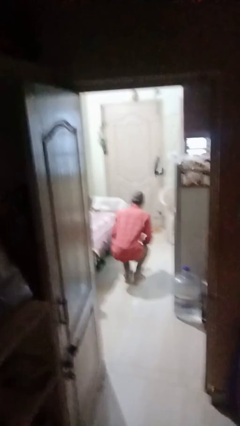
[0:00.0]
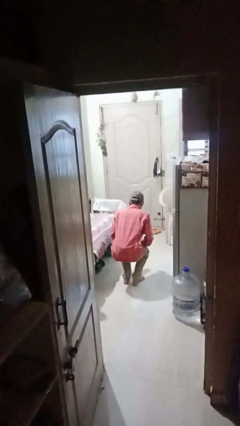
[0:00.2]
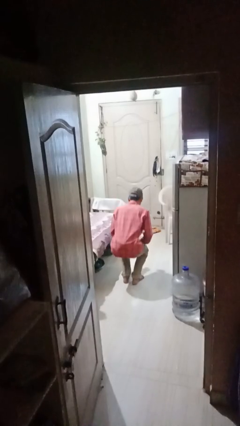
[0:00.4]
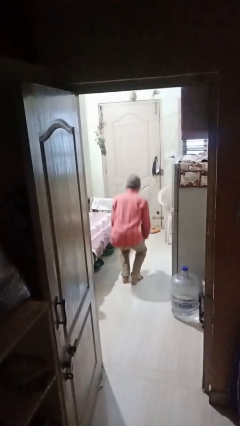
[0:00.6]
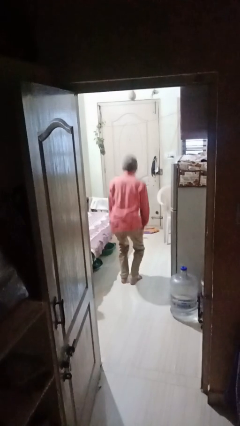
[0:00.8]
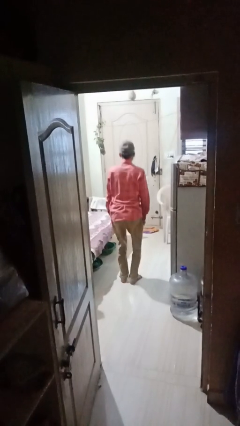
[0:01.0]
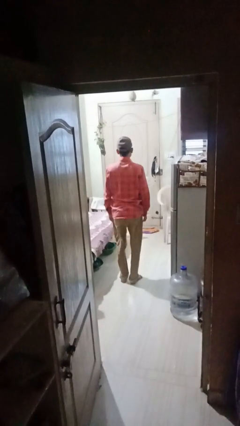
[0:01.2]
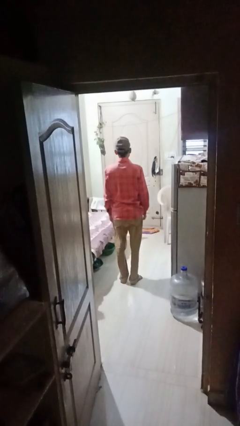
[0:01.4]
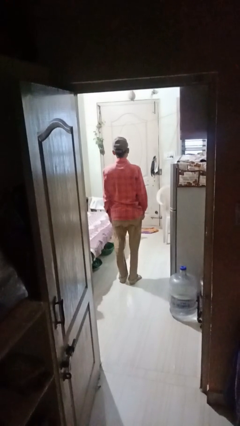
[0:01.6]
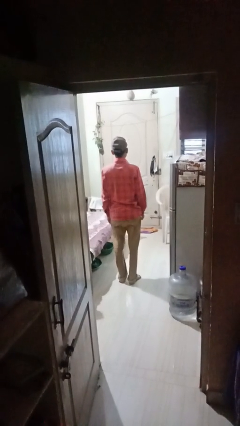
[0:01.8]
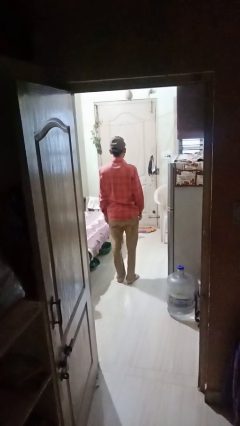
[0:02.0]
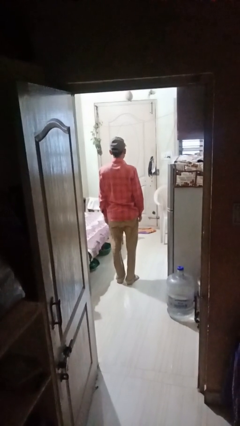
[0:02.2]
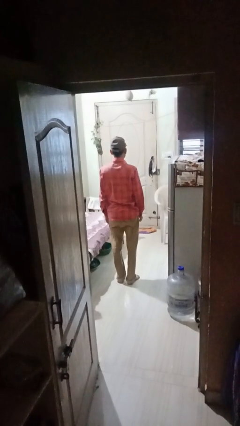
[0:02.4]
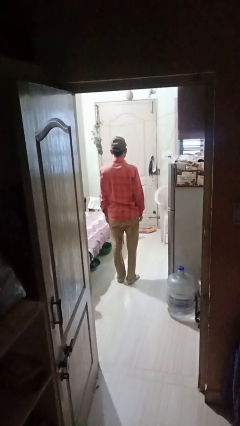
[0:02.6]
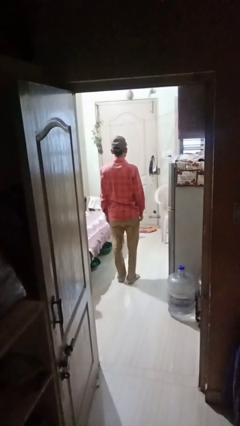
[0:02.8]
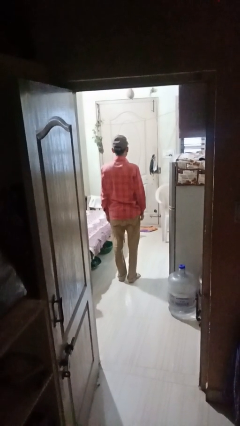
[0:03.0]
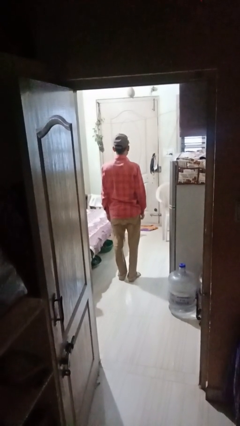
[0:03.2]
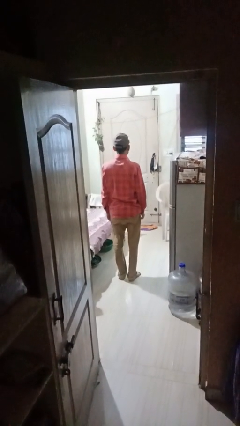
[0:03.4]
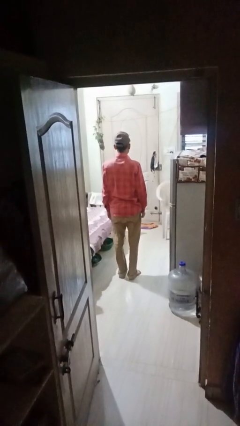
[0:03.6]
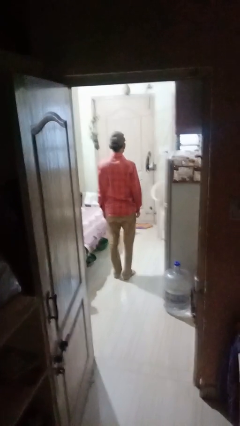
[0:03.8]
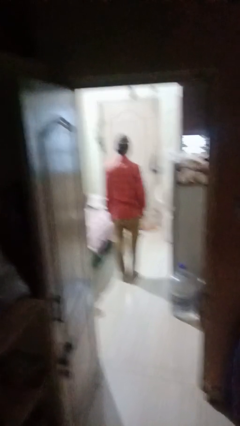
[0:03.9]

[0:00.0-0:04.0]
person stands up

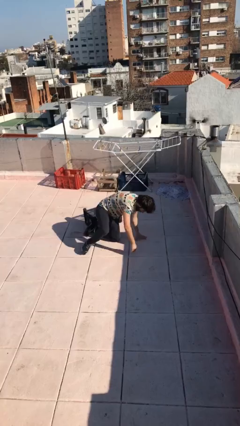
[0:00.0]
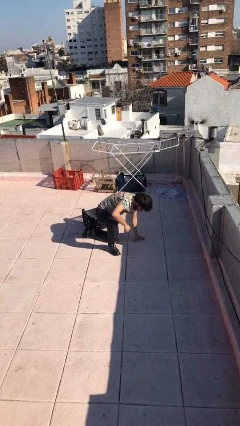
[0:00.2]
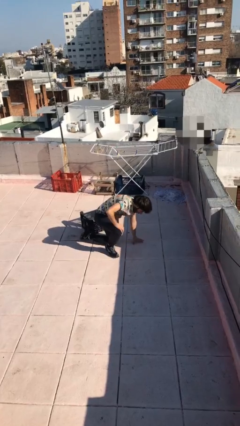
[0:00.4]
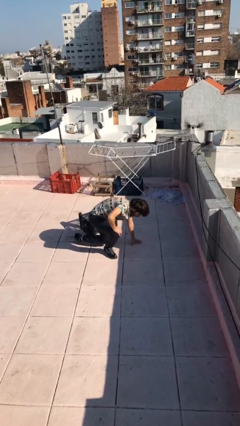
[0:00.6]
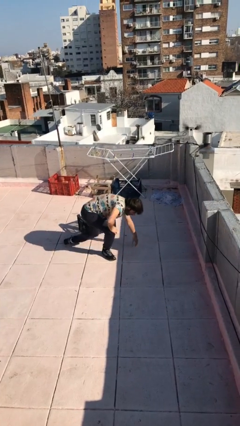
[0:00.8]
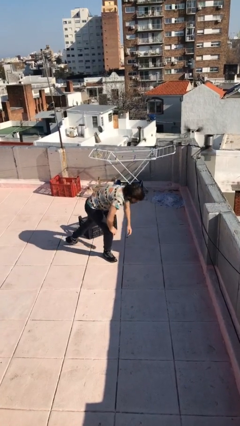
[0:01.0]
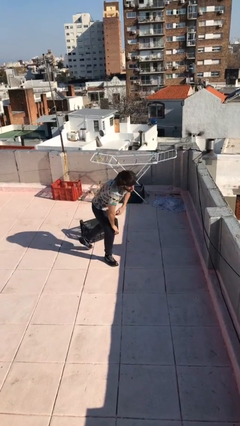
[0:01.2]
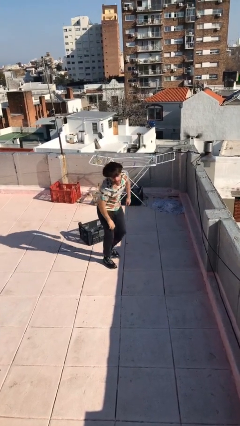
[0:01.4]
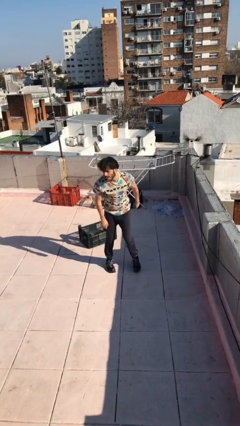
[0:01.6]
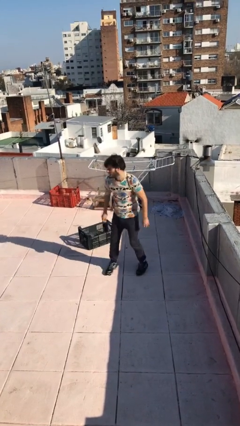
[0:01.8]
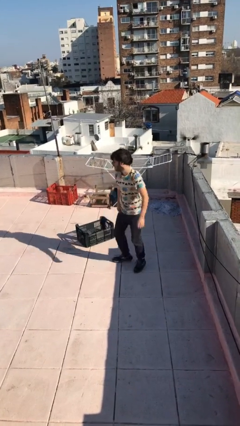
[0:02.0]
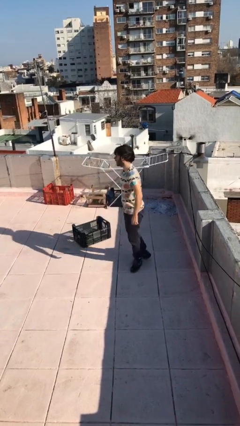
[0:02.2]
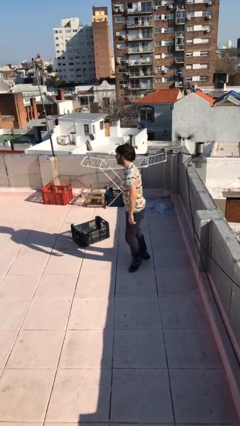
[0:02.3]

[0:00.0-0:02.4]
person stands up from floor

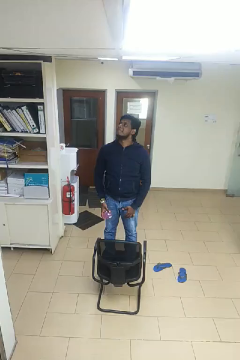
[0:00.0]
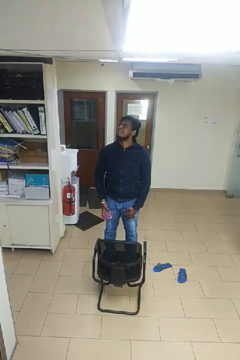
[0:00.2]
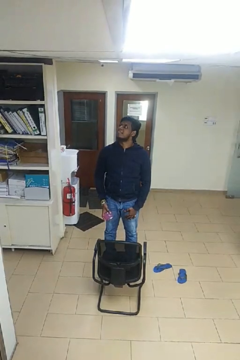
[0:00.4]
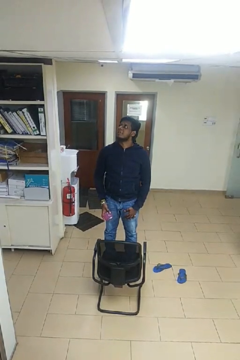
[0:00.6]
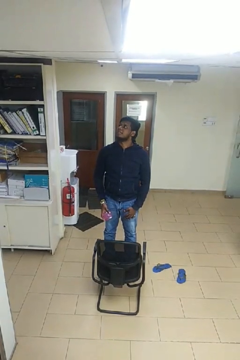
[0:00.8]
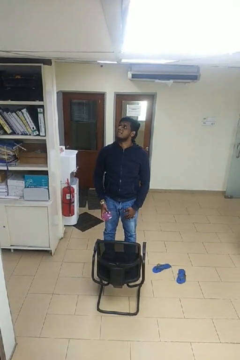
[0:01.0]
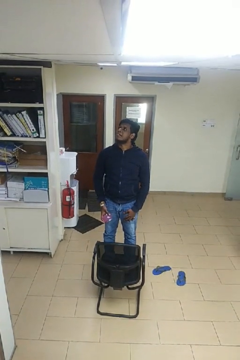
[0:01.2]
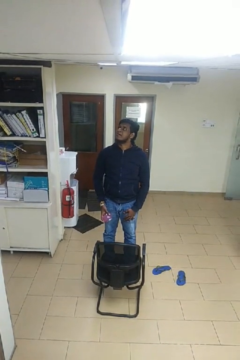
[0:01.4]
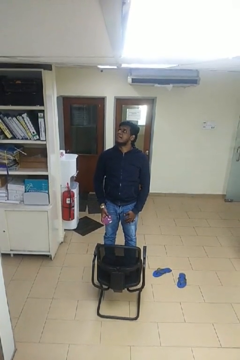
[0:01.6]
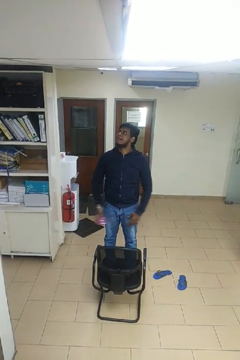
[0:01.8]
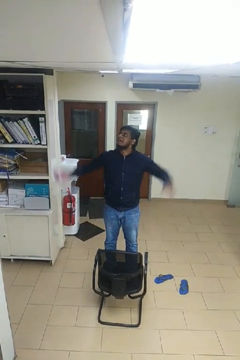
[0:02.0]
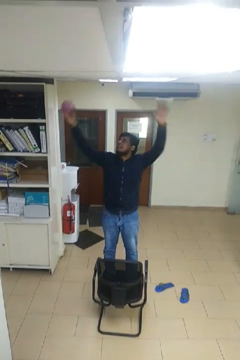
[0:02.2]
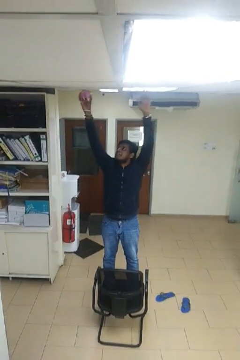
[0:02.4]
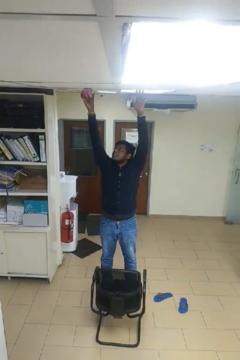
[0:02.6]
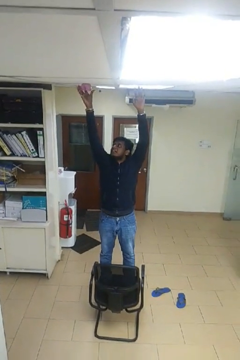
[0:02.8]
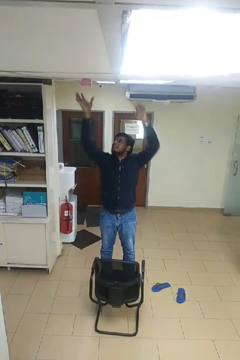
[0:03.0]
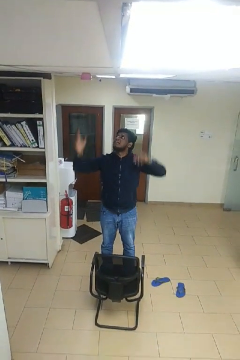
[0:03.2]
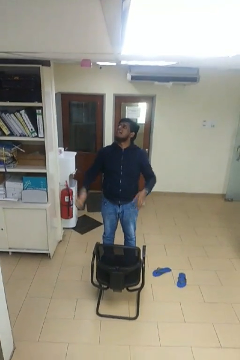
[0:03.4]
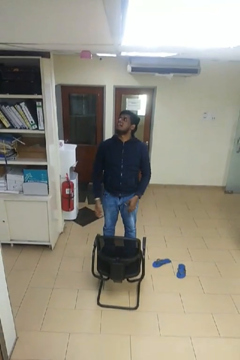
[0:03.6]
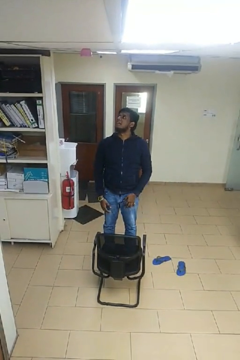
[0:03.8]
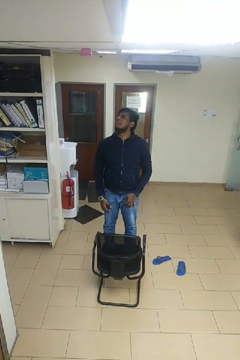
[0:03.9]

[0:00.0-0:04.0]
person puts up smoke detector

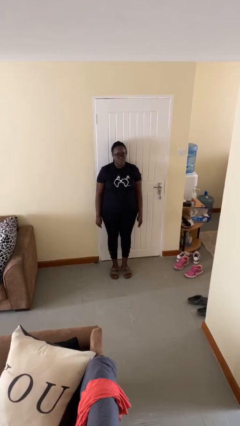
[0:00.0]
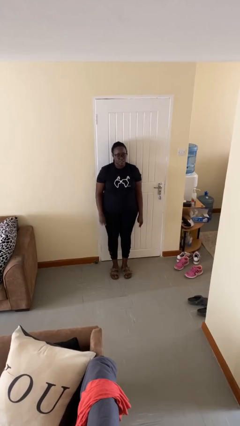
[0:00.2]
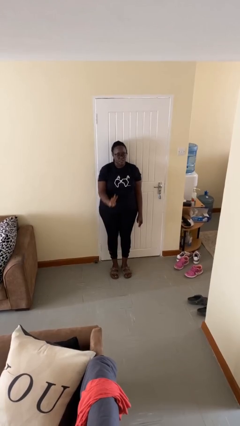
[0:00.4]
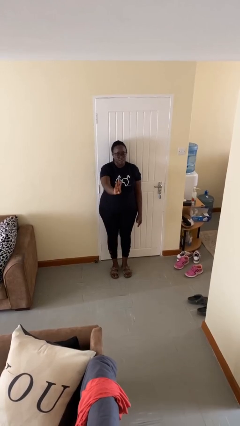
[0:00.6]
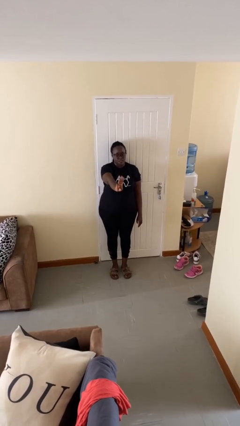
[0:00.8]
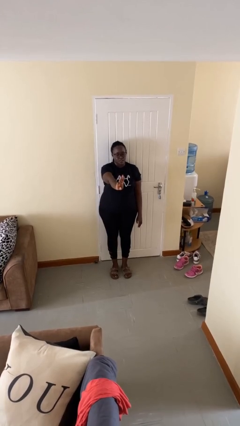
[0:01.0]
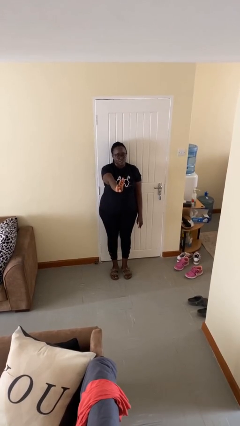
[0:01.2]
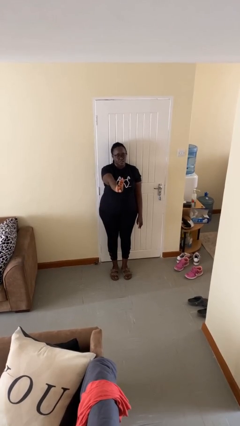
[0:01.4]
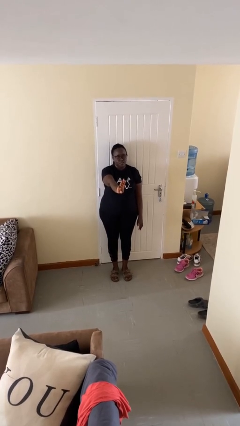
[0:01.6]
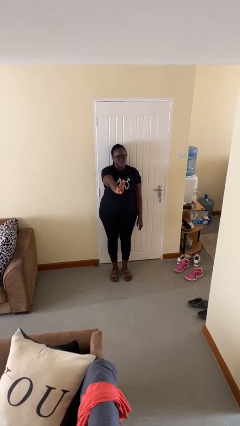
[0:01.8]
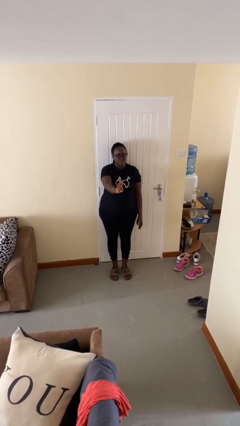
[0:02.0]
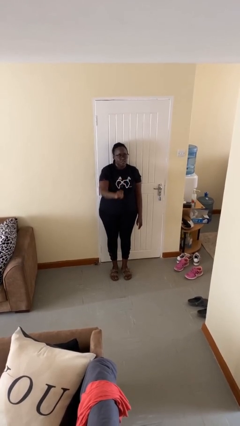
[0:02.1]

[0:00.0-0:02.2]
person gestures number three

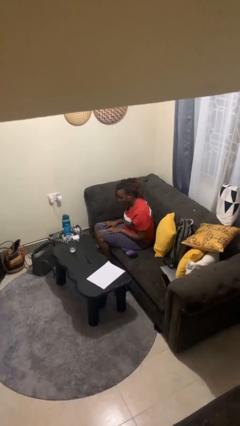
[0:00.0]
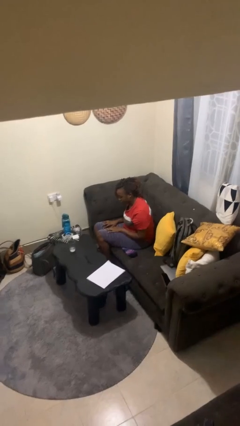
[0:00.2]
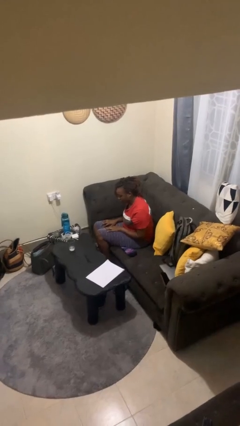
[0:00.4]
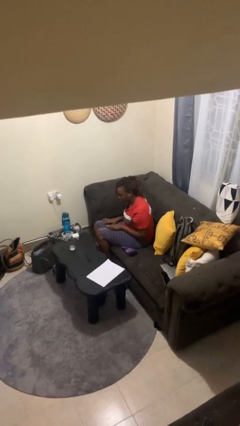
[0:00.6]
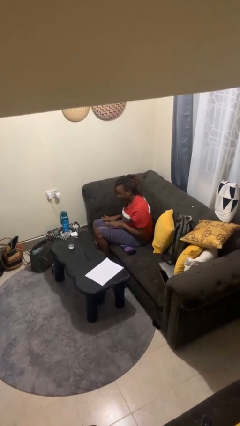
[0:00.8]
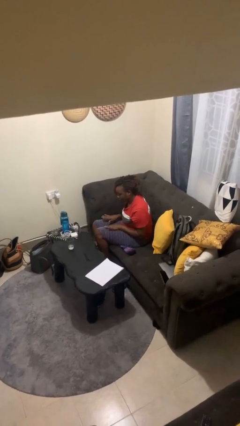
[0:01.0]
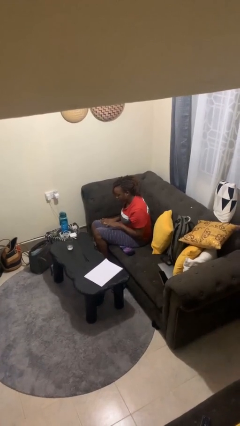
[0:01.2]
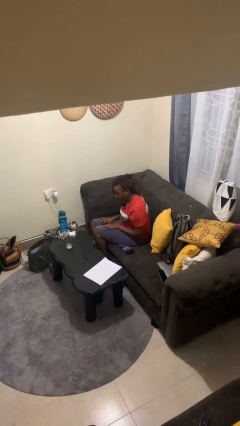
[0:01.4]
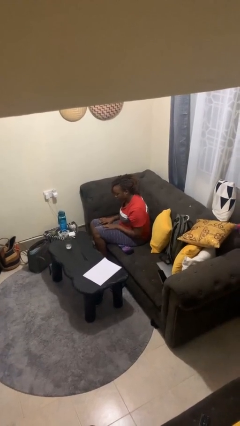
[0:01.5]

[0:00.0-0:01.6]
person slaps hands on thighs

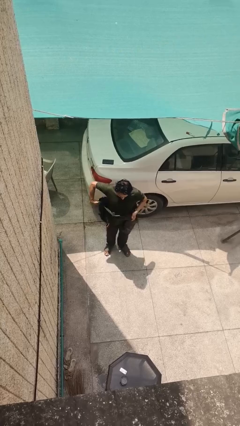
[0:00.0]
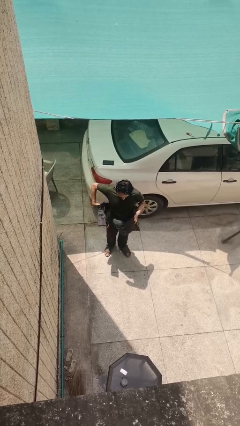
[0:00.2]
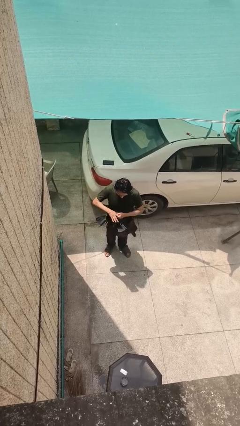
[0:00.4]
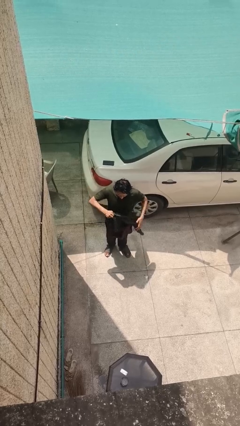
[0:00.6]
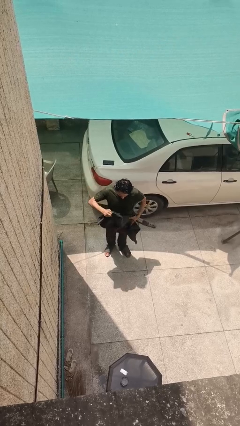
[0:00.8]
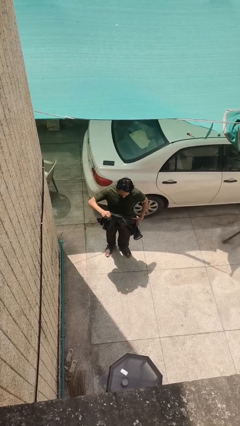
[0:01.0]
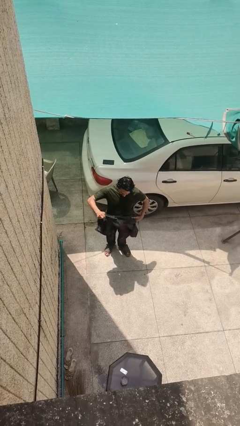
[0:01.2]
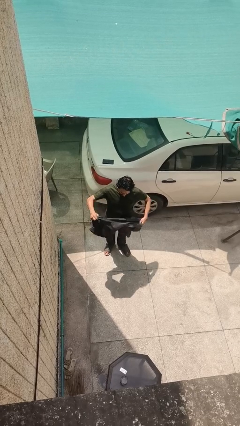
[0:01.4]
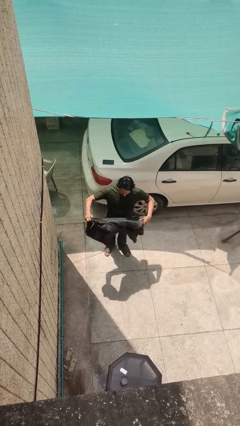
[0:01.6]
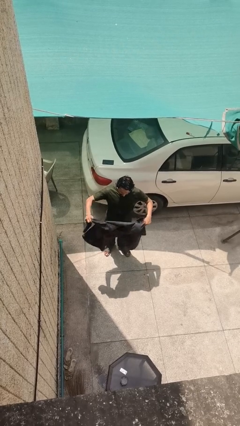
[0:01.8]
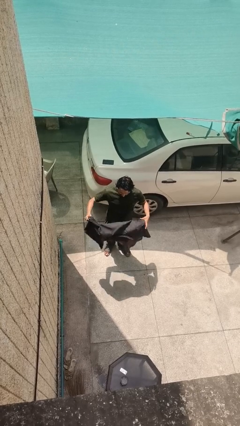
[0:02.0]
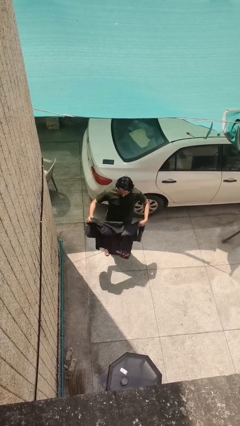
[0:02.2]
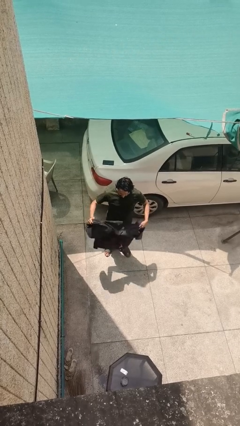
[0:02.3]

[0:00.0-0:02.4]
person unties jacket around waist

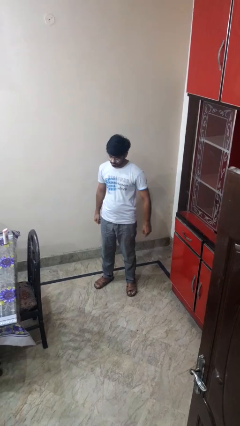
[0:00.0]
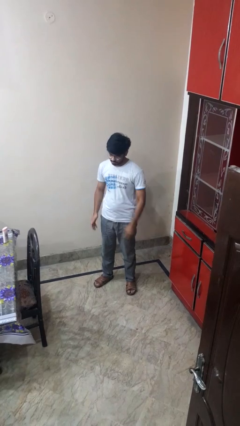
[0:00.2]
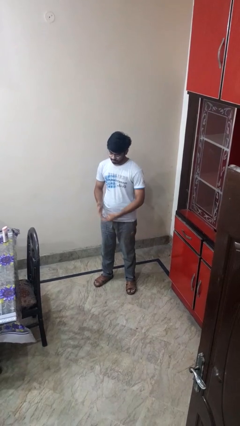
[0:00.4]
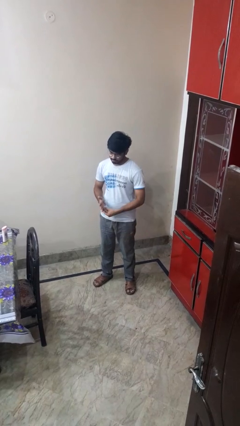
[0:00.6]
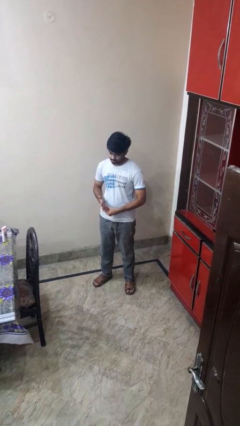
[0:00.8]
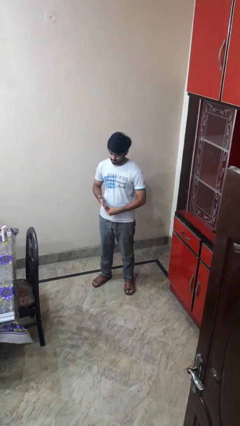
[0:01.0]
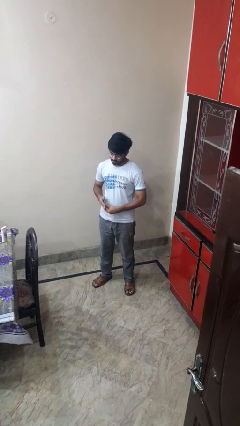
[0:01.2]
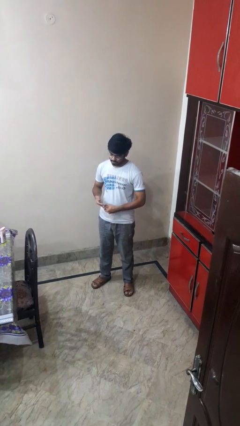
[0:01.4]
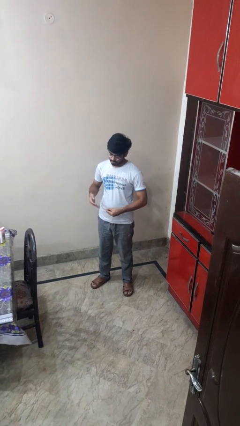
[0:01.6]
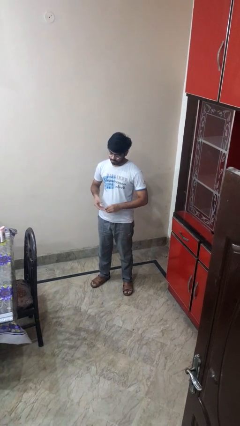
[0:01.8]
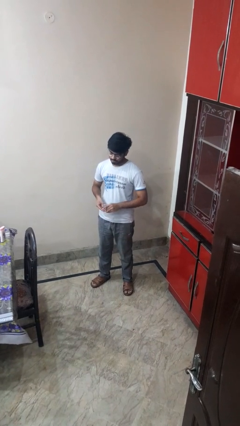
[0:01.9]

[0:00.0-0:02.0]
person takes off ring
